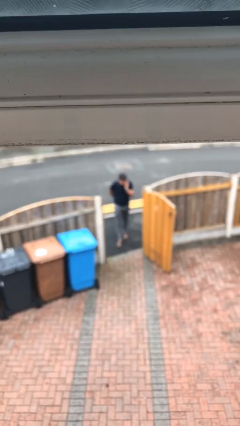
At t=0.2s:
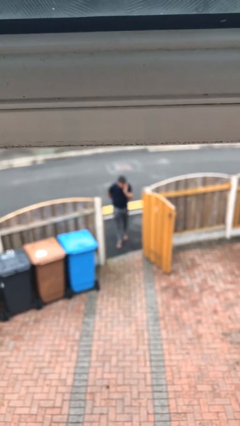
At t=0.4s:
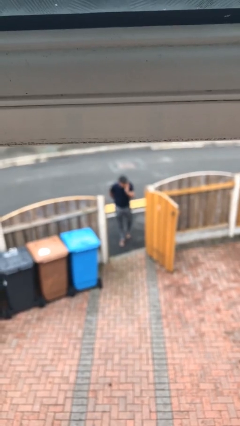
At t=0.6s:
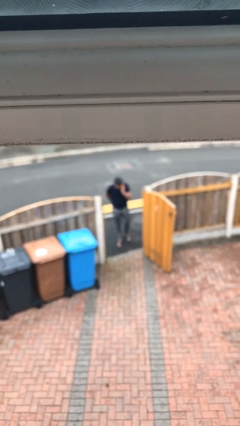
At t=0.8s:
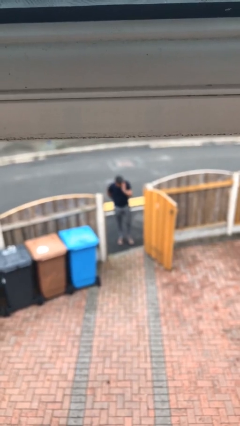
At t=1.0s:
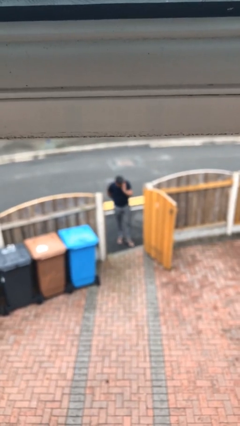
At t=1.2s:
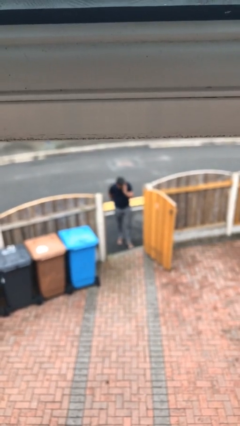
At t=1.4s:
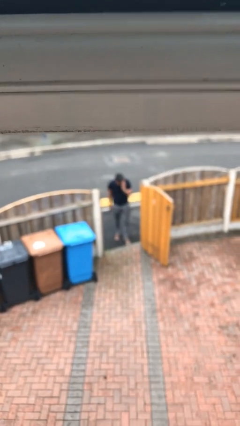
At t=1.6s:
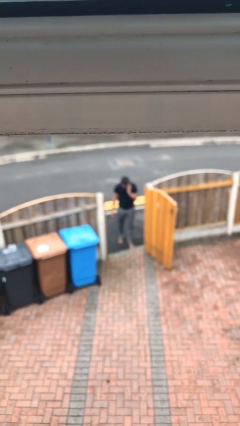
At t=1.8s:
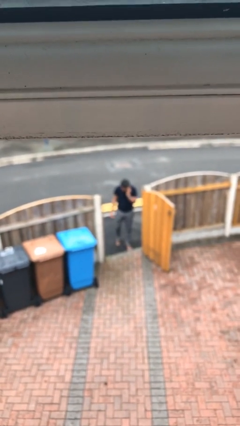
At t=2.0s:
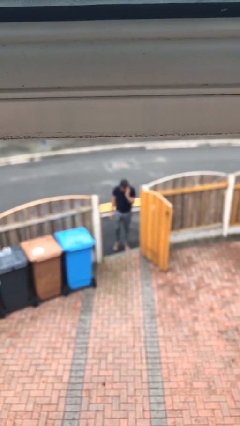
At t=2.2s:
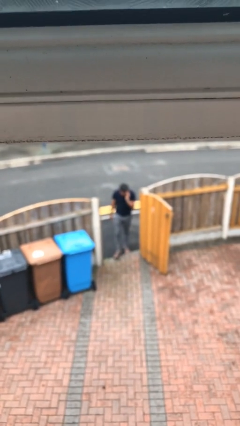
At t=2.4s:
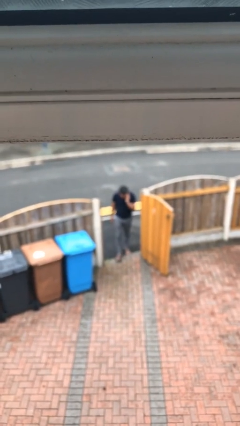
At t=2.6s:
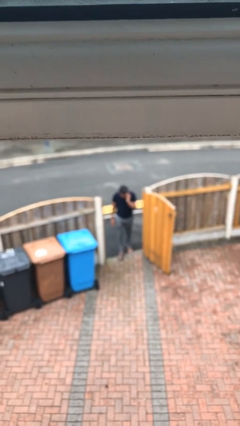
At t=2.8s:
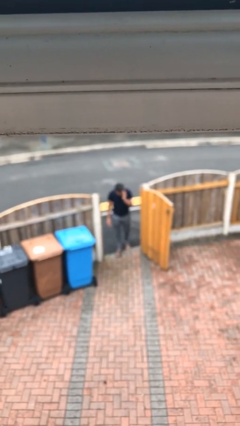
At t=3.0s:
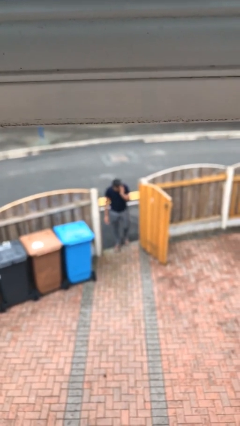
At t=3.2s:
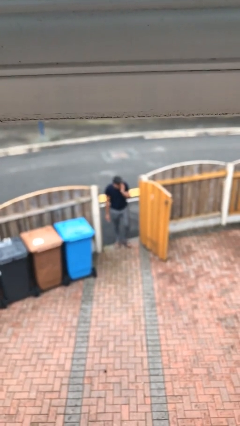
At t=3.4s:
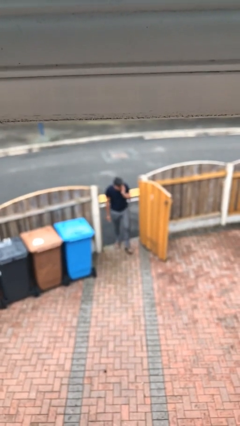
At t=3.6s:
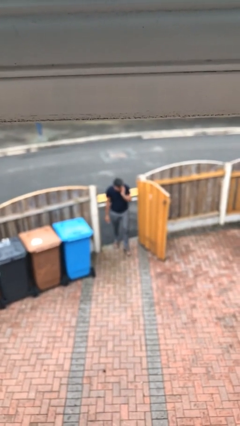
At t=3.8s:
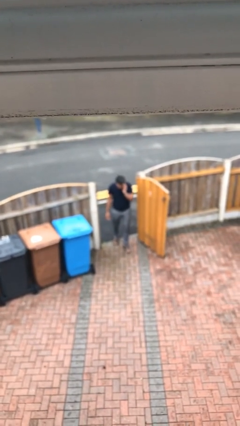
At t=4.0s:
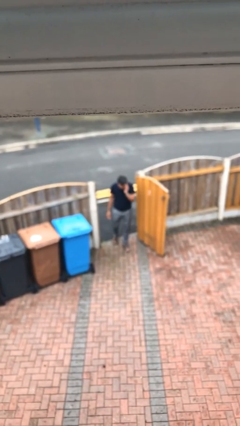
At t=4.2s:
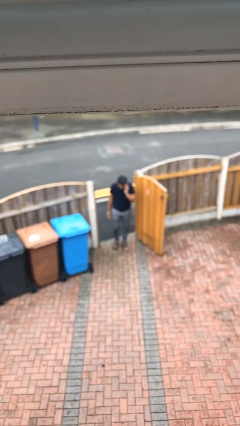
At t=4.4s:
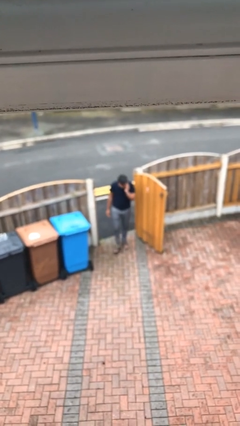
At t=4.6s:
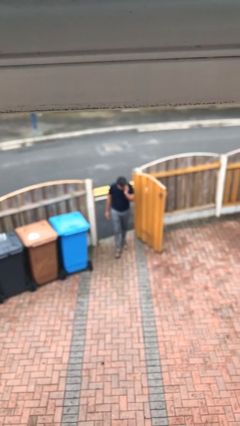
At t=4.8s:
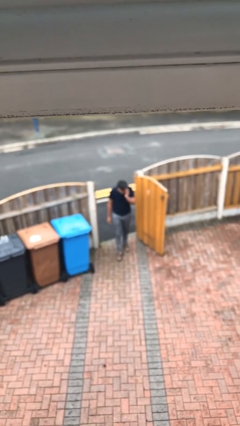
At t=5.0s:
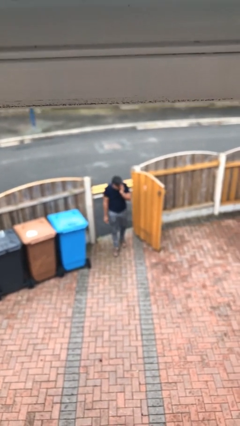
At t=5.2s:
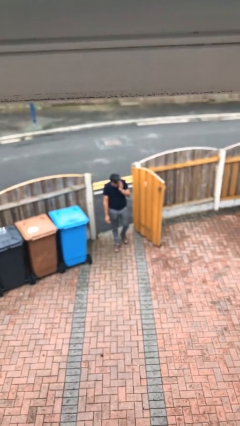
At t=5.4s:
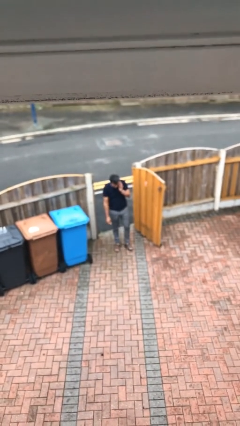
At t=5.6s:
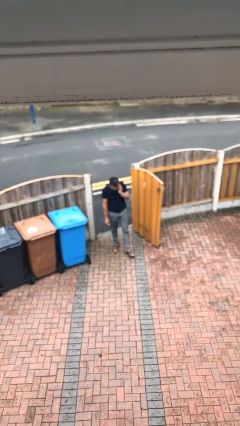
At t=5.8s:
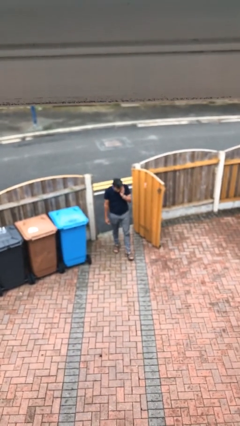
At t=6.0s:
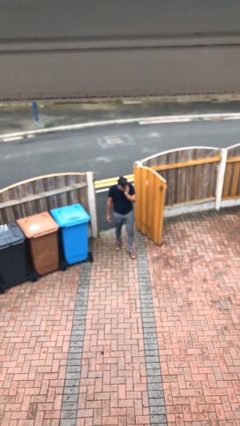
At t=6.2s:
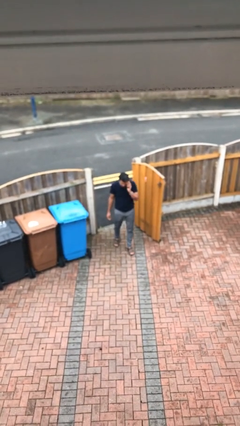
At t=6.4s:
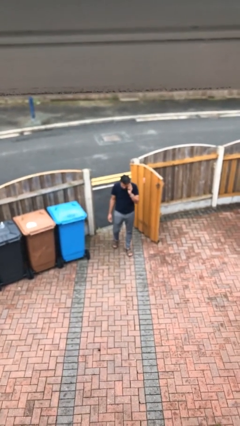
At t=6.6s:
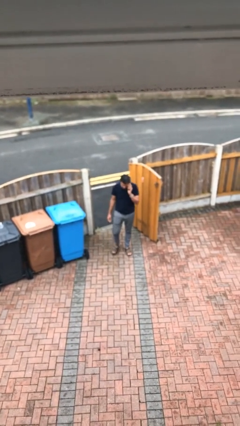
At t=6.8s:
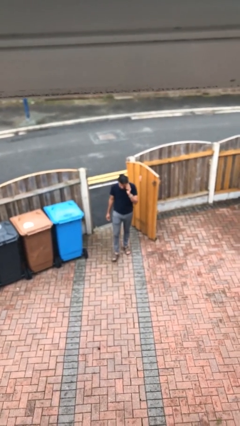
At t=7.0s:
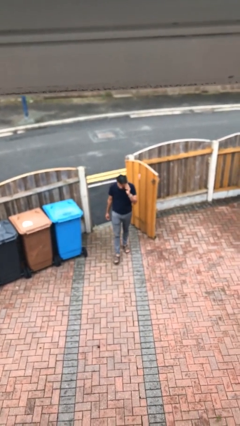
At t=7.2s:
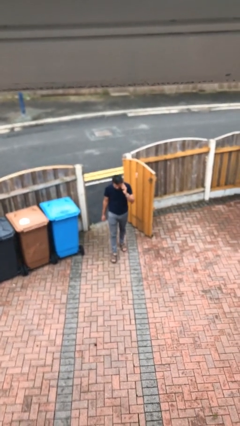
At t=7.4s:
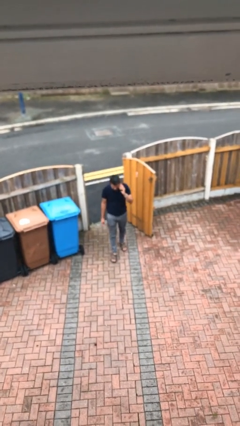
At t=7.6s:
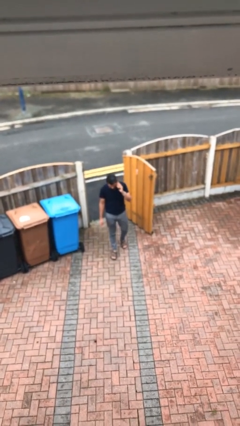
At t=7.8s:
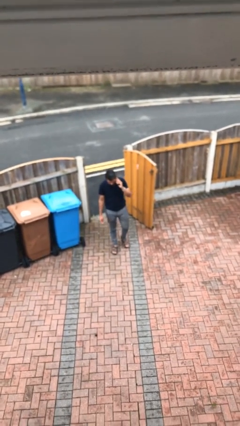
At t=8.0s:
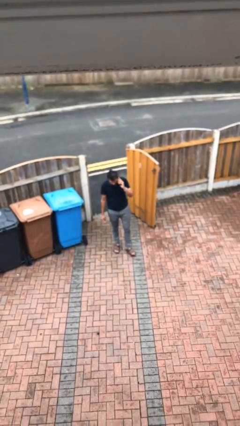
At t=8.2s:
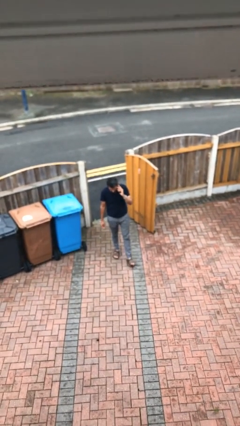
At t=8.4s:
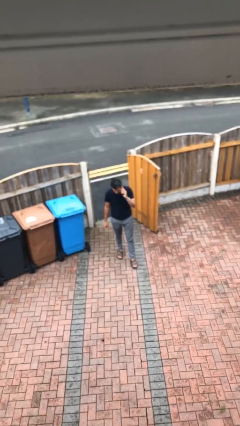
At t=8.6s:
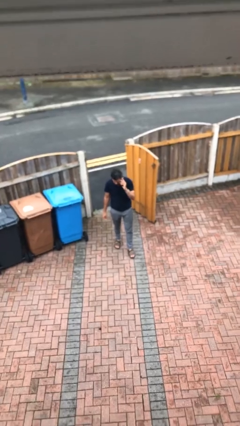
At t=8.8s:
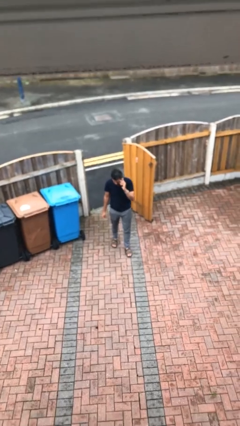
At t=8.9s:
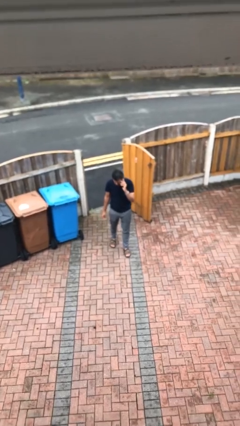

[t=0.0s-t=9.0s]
person enters scene through structure

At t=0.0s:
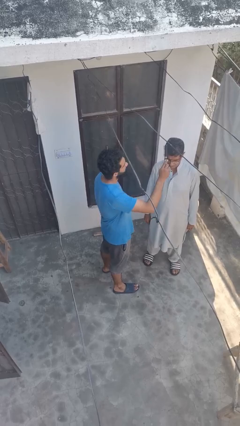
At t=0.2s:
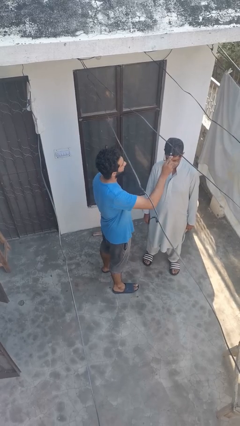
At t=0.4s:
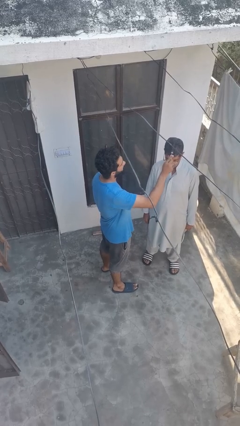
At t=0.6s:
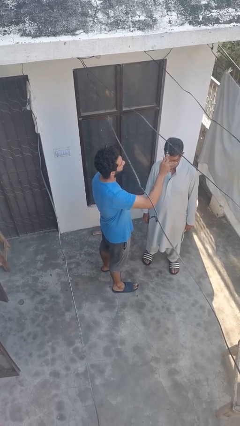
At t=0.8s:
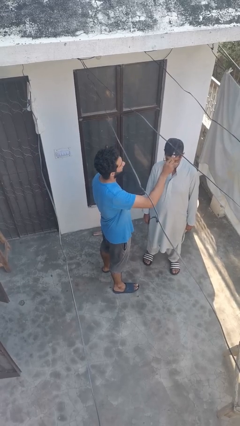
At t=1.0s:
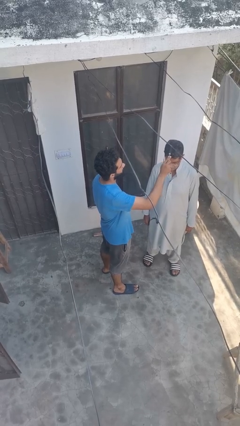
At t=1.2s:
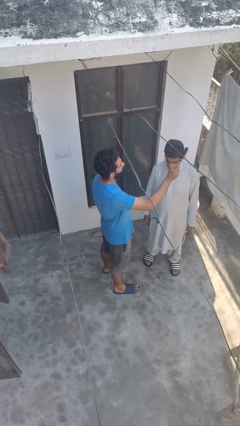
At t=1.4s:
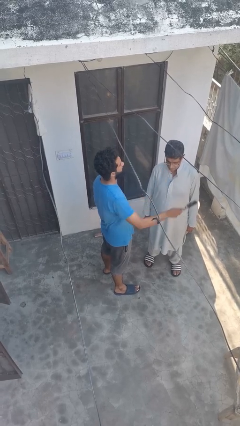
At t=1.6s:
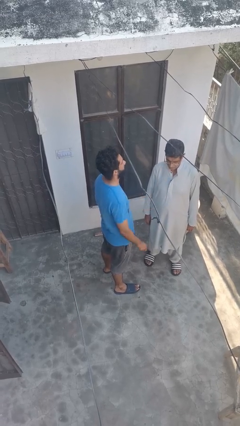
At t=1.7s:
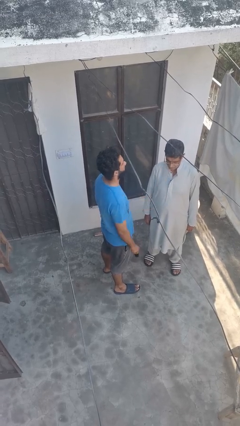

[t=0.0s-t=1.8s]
person brushes hair of person

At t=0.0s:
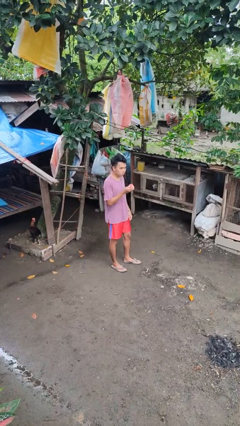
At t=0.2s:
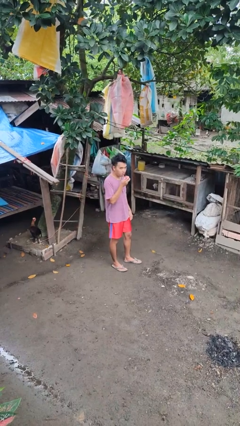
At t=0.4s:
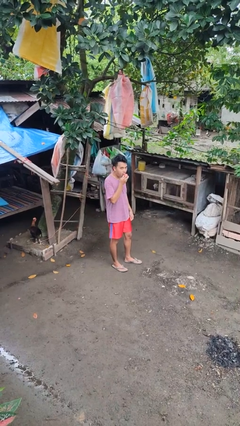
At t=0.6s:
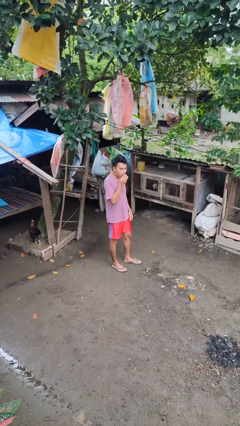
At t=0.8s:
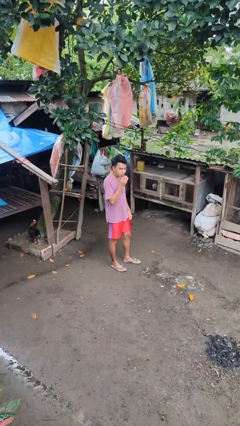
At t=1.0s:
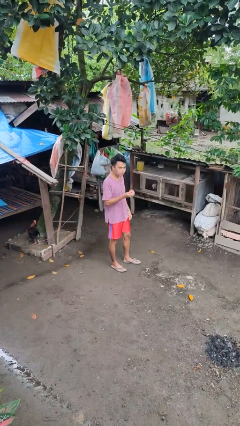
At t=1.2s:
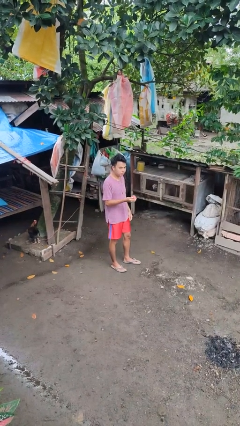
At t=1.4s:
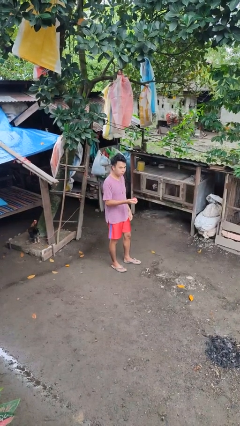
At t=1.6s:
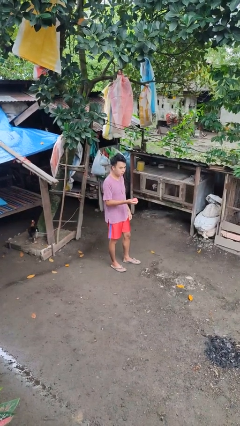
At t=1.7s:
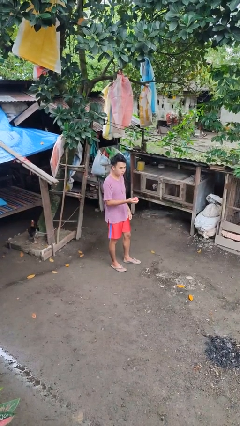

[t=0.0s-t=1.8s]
person eats apple

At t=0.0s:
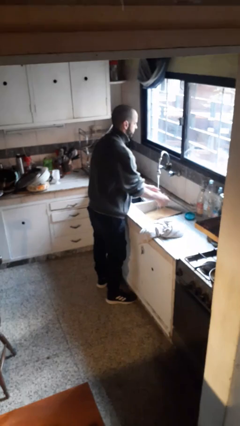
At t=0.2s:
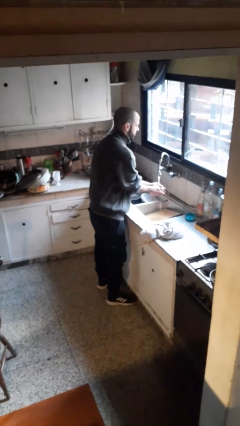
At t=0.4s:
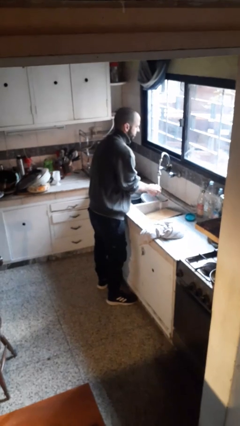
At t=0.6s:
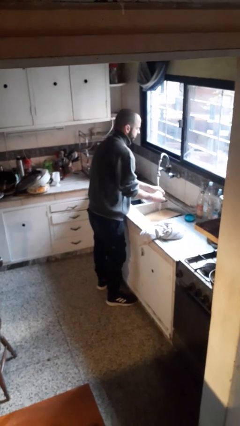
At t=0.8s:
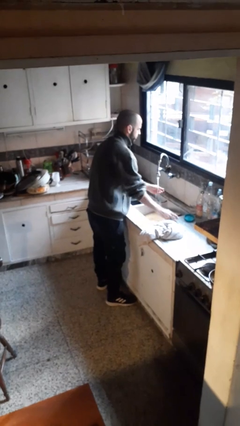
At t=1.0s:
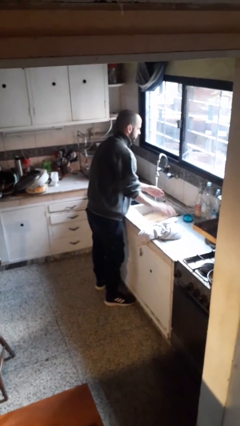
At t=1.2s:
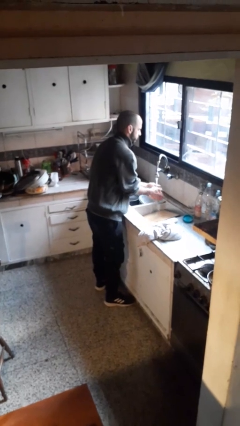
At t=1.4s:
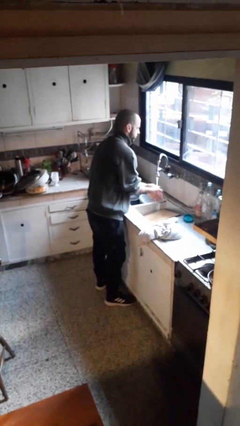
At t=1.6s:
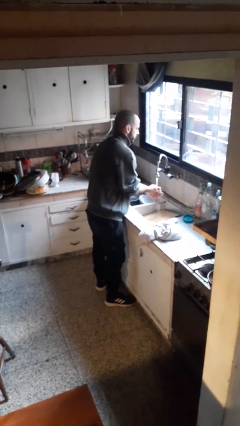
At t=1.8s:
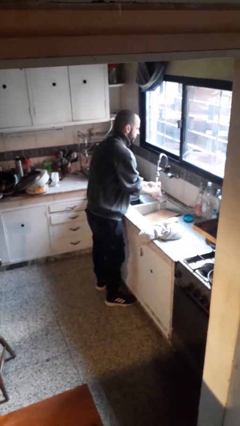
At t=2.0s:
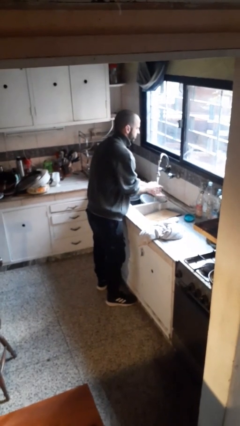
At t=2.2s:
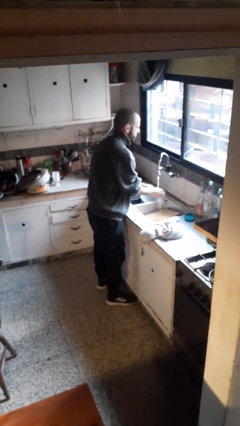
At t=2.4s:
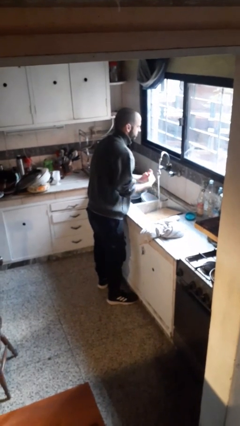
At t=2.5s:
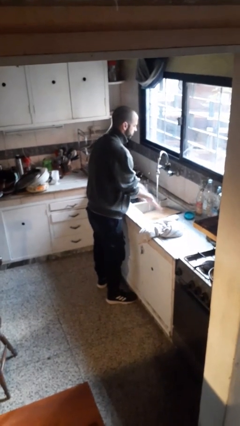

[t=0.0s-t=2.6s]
person washes hands

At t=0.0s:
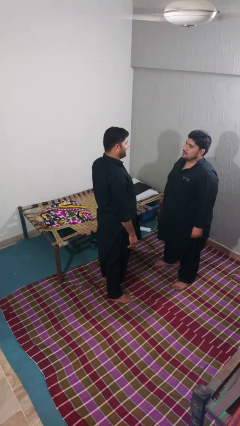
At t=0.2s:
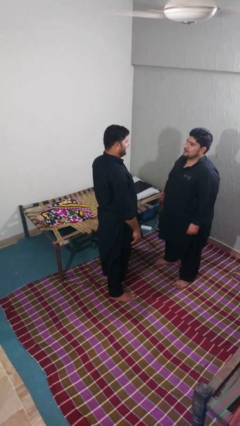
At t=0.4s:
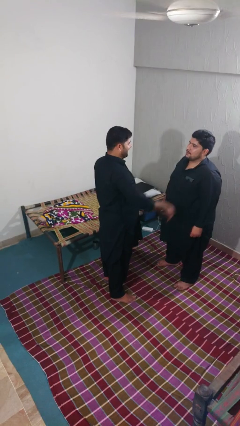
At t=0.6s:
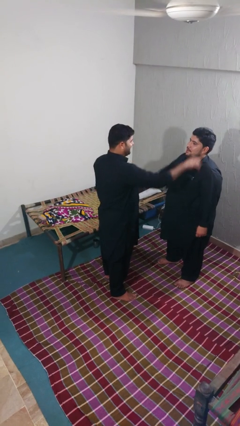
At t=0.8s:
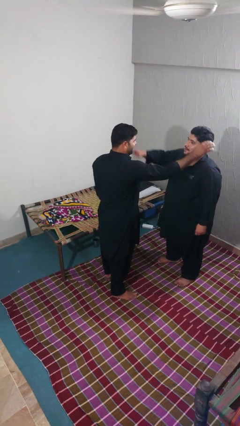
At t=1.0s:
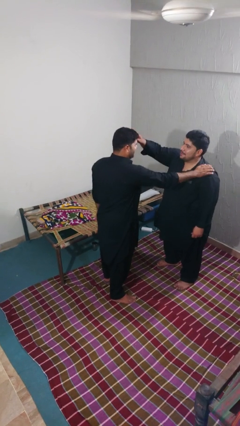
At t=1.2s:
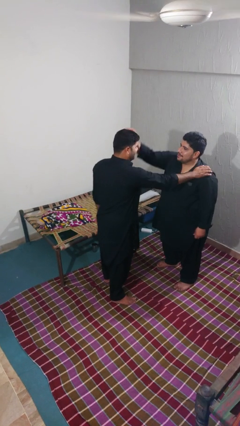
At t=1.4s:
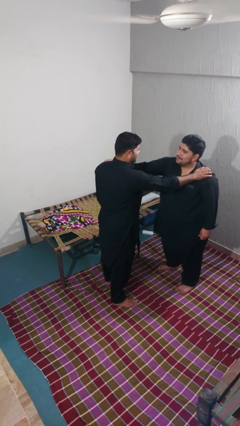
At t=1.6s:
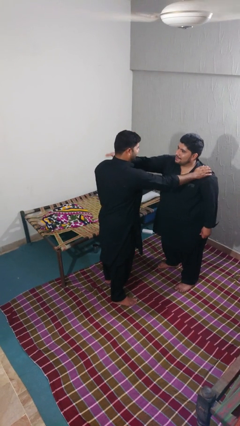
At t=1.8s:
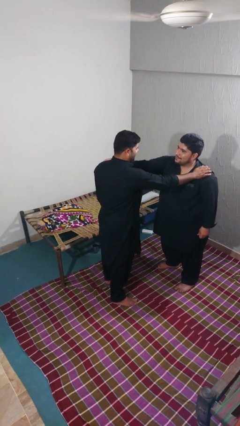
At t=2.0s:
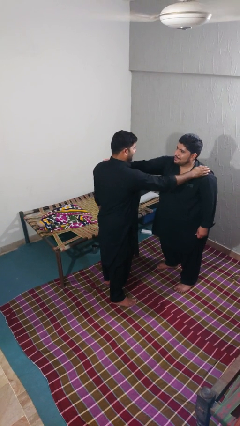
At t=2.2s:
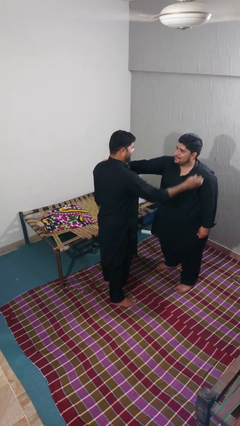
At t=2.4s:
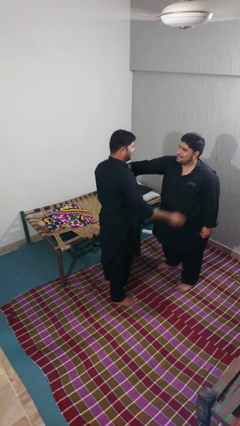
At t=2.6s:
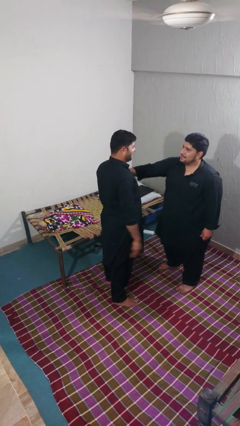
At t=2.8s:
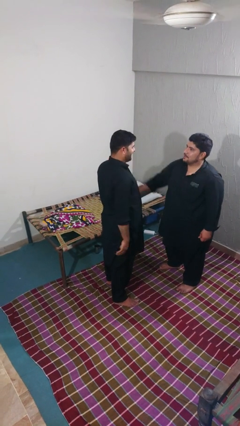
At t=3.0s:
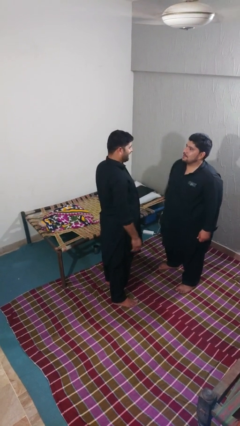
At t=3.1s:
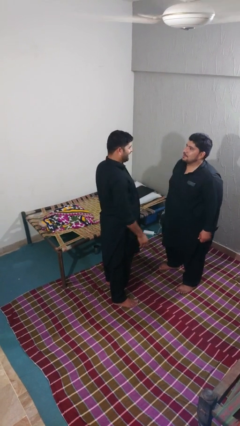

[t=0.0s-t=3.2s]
person pounds shoulders of person
